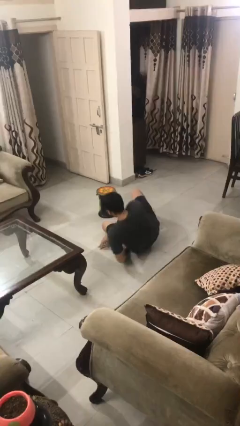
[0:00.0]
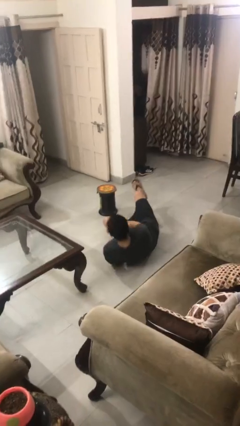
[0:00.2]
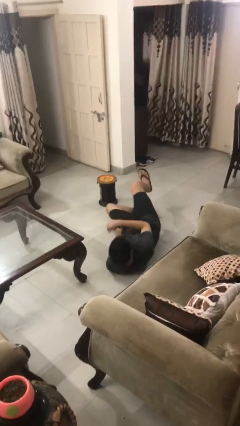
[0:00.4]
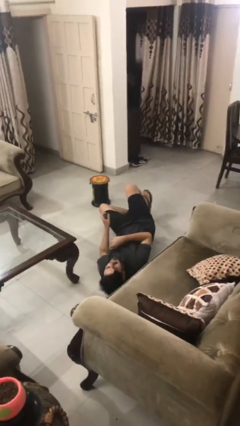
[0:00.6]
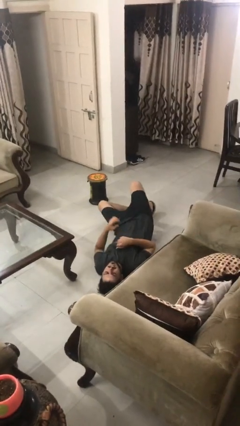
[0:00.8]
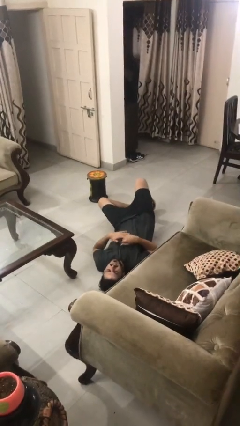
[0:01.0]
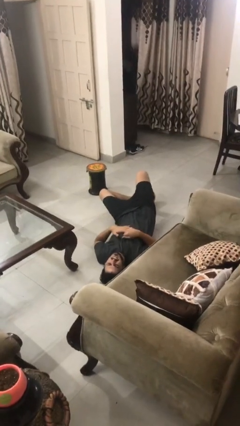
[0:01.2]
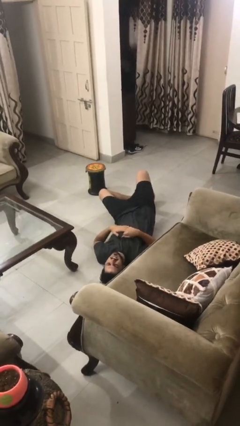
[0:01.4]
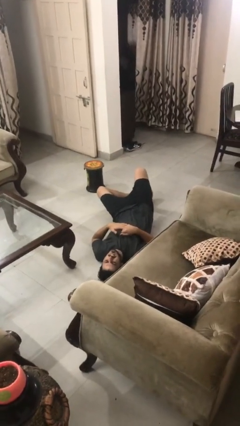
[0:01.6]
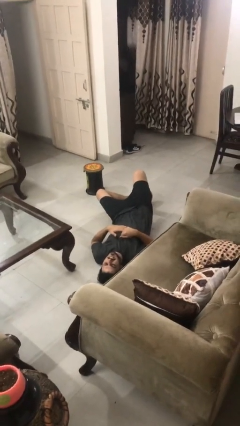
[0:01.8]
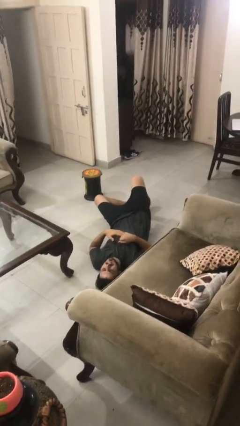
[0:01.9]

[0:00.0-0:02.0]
person lies down on floor

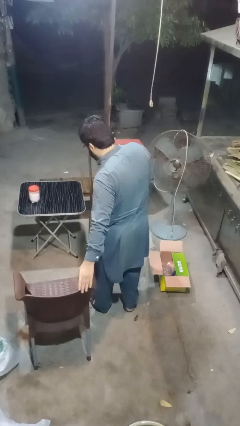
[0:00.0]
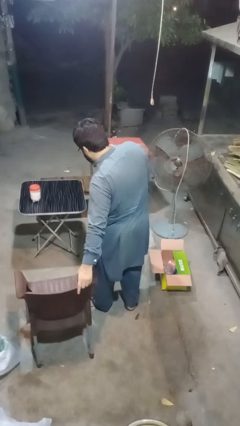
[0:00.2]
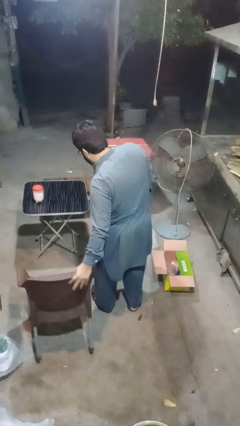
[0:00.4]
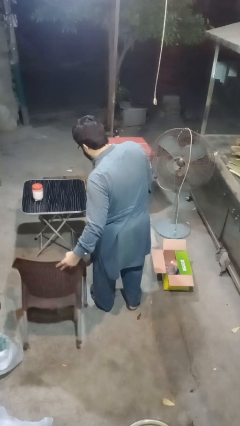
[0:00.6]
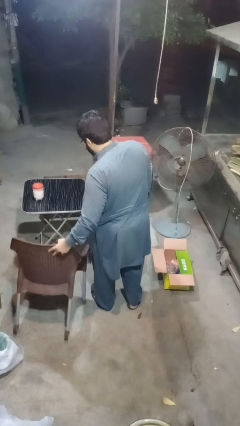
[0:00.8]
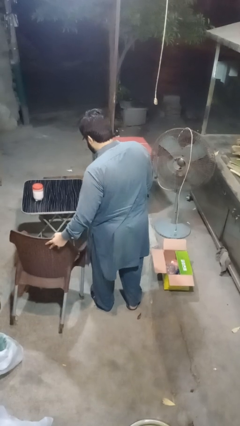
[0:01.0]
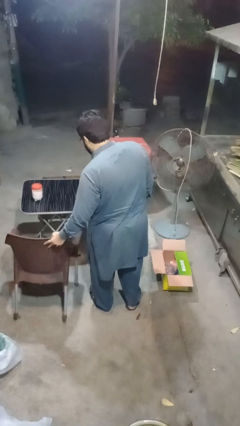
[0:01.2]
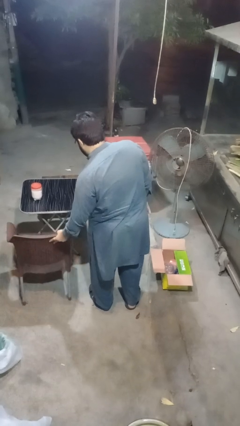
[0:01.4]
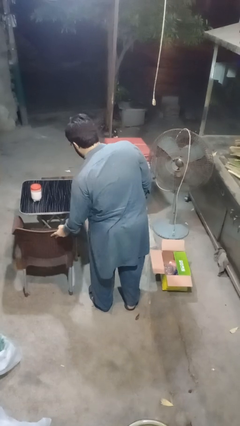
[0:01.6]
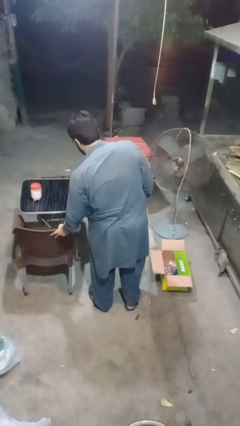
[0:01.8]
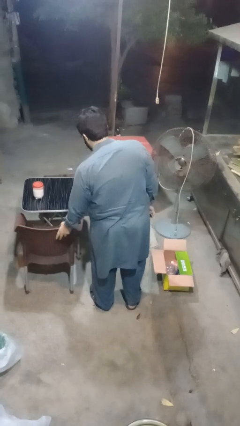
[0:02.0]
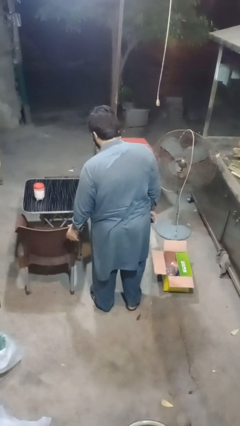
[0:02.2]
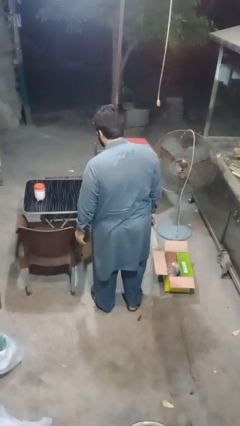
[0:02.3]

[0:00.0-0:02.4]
person pushes in chair

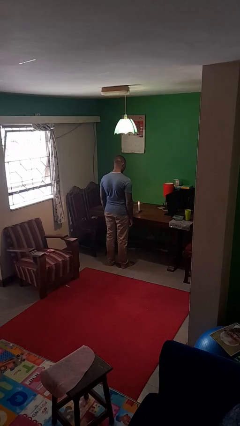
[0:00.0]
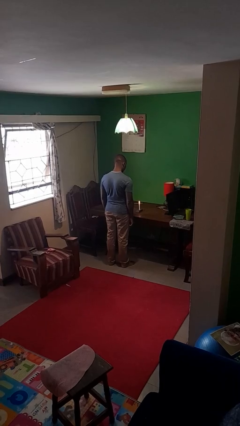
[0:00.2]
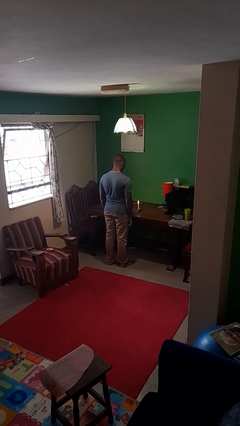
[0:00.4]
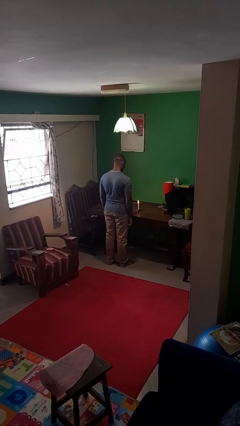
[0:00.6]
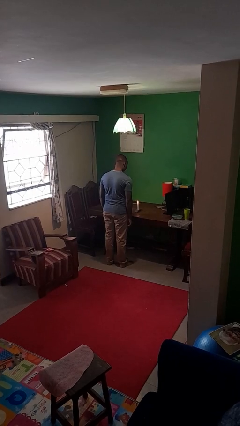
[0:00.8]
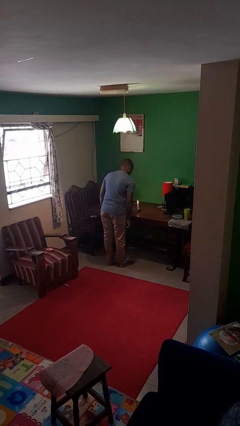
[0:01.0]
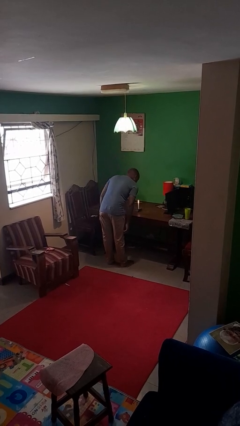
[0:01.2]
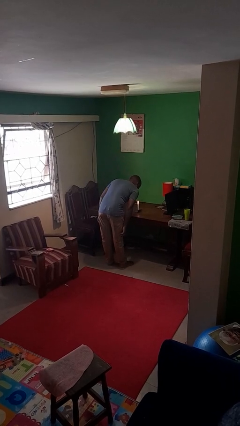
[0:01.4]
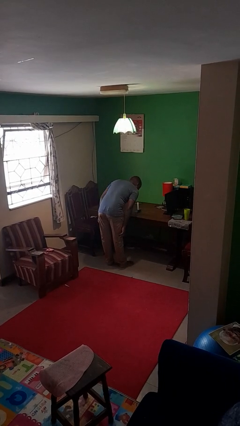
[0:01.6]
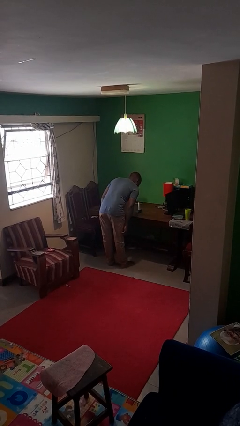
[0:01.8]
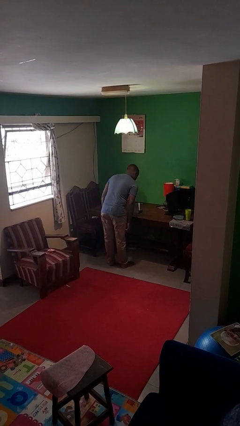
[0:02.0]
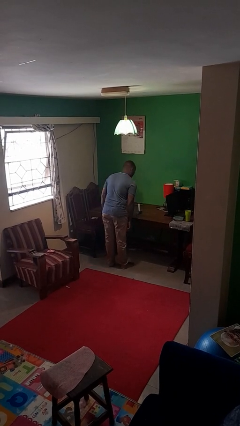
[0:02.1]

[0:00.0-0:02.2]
person extinguishes candle

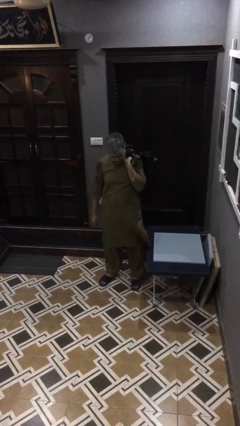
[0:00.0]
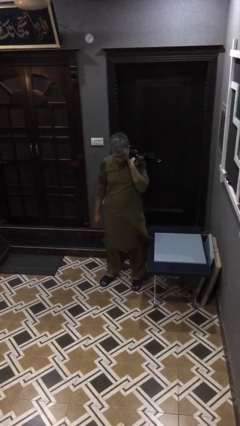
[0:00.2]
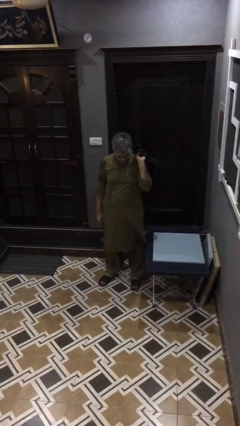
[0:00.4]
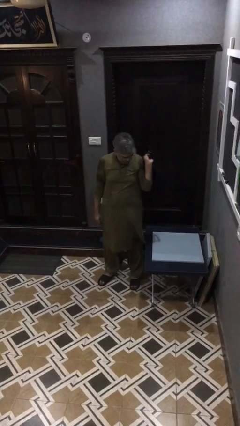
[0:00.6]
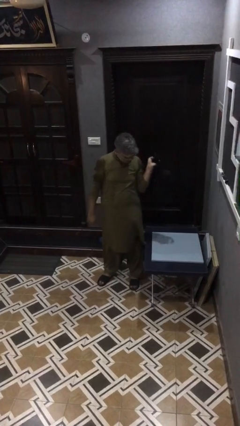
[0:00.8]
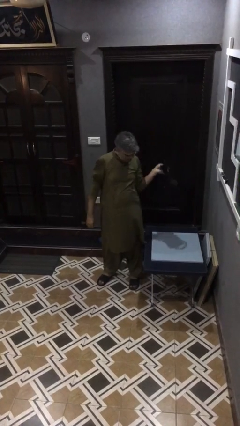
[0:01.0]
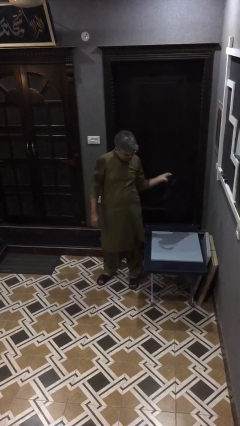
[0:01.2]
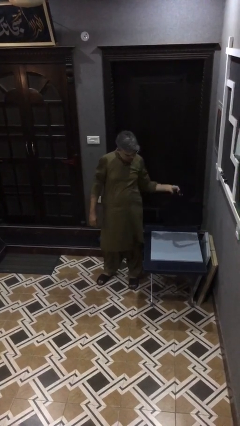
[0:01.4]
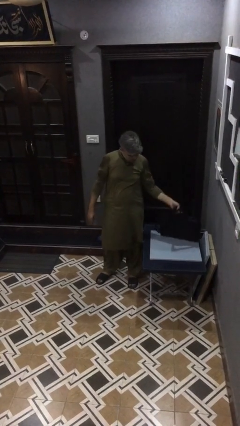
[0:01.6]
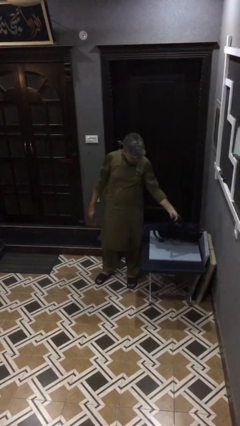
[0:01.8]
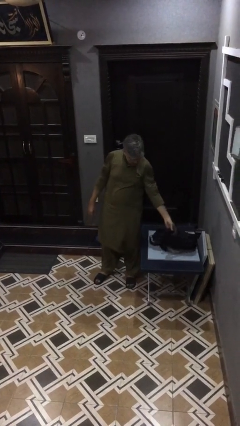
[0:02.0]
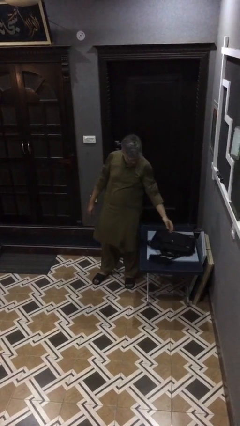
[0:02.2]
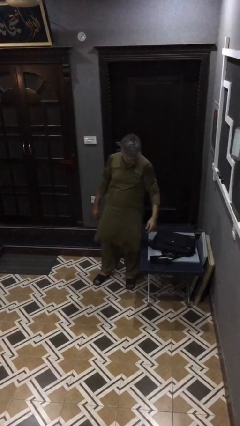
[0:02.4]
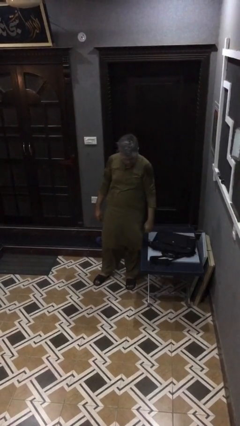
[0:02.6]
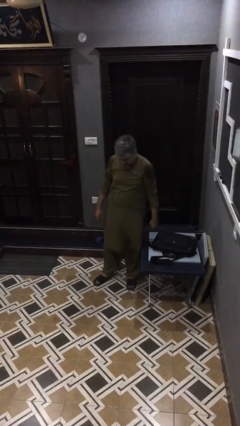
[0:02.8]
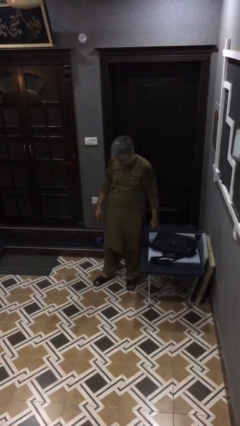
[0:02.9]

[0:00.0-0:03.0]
person puts down object on table

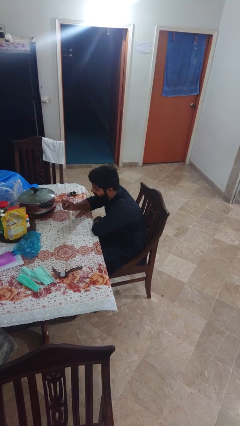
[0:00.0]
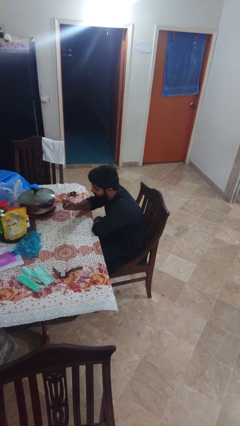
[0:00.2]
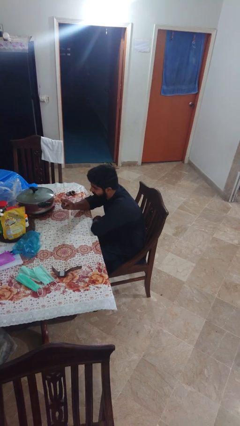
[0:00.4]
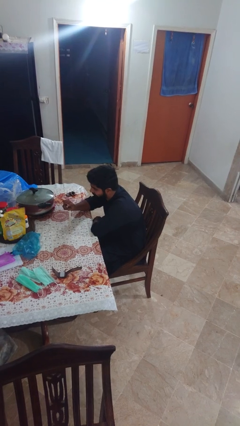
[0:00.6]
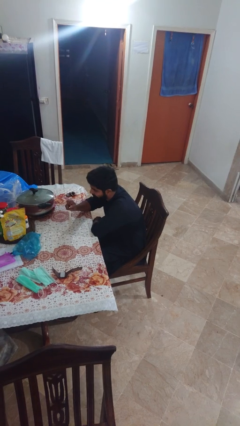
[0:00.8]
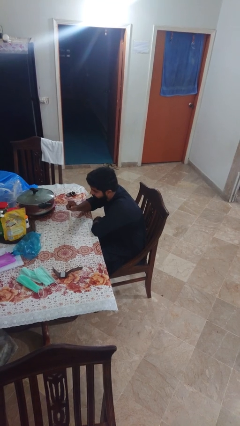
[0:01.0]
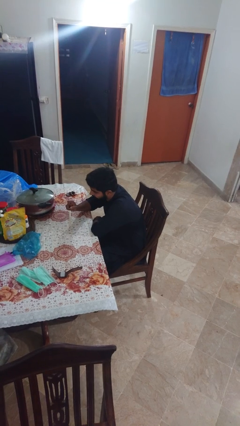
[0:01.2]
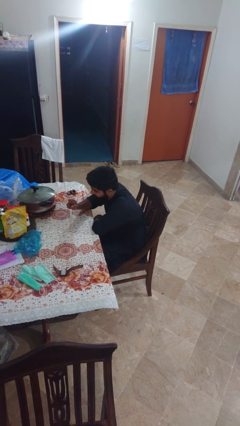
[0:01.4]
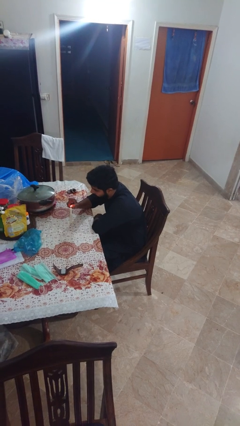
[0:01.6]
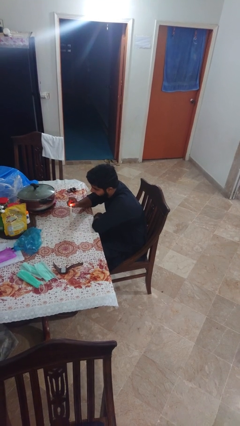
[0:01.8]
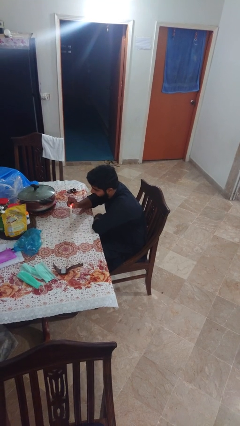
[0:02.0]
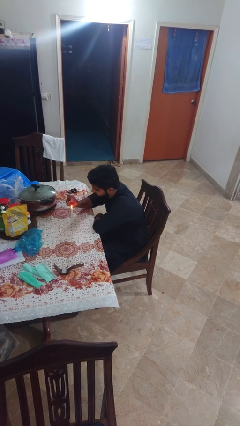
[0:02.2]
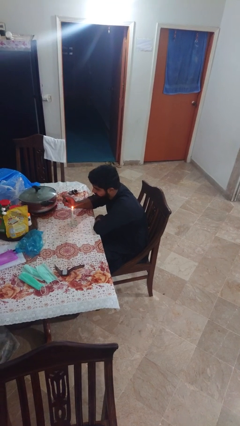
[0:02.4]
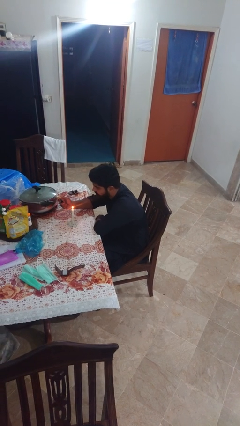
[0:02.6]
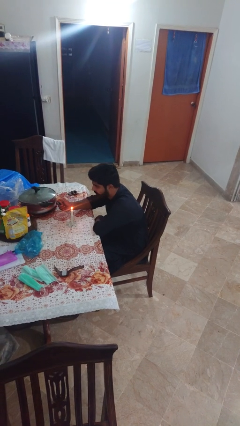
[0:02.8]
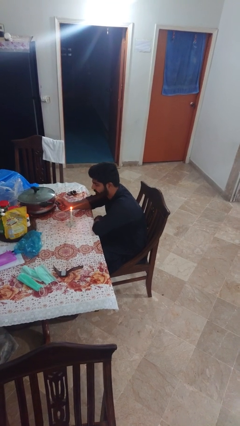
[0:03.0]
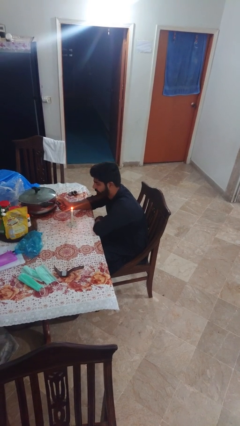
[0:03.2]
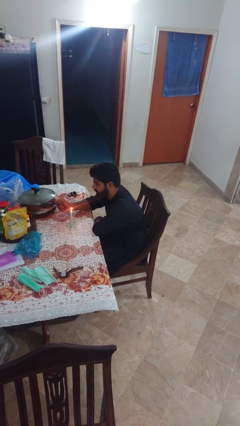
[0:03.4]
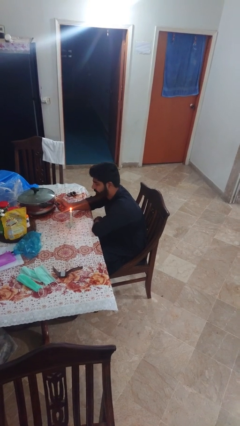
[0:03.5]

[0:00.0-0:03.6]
person lights candle

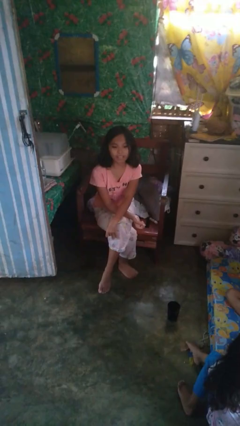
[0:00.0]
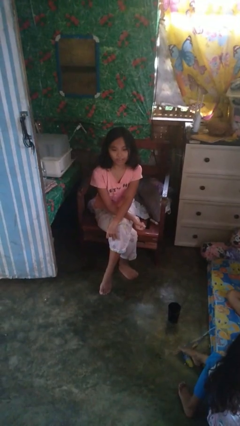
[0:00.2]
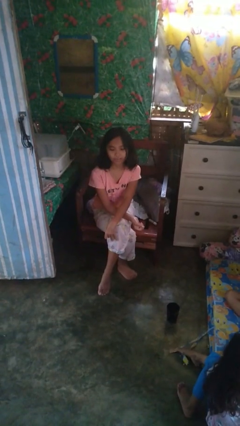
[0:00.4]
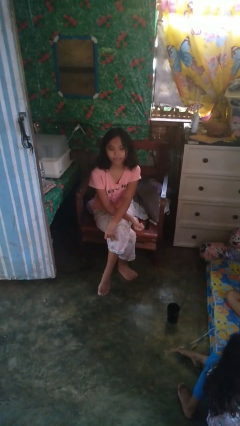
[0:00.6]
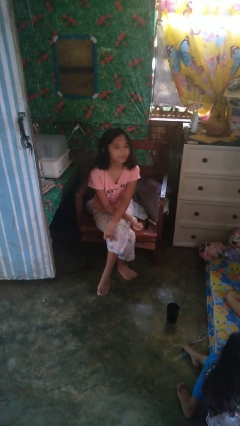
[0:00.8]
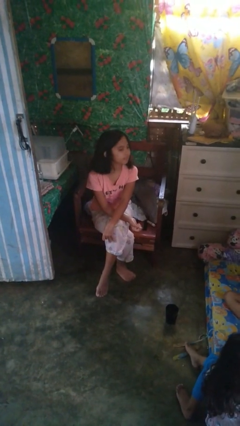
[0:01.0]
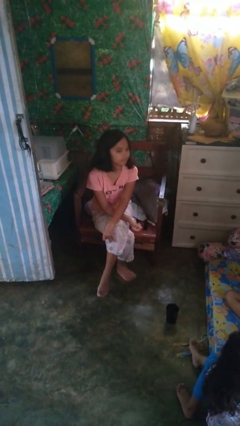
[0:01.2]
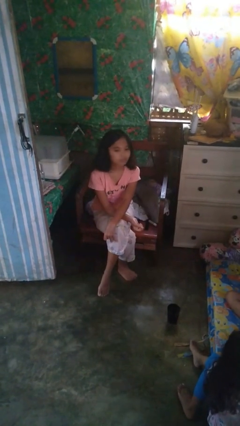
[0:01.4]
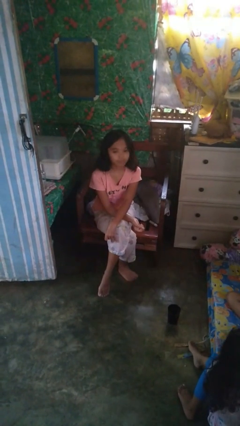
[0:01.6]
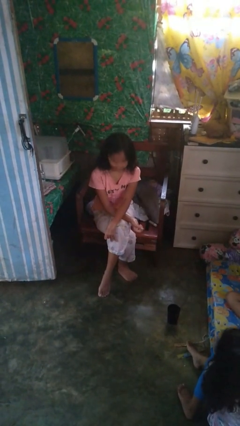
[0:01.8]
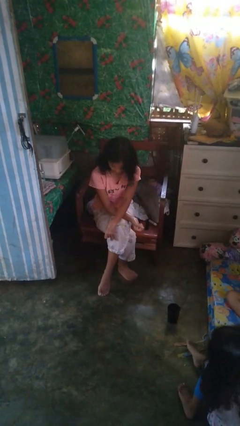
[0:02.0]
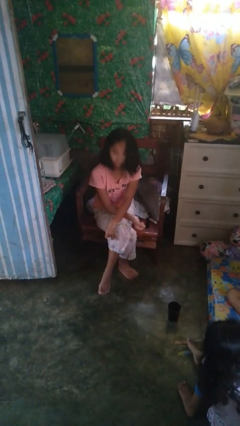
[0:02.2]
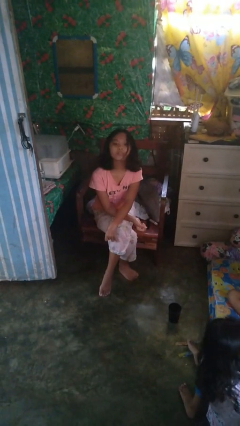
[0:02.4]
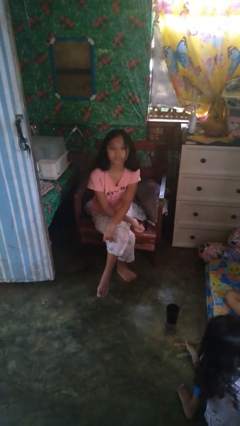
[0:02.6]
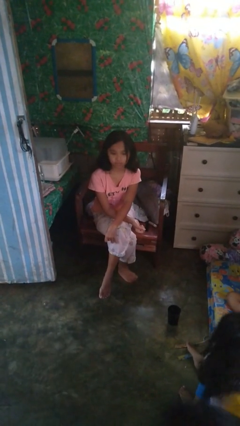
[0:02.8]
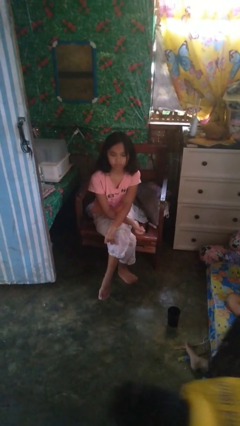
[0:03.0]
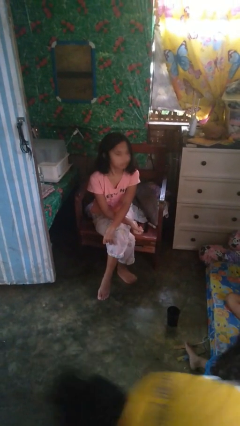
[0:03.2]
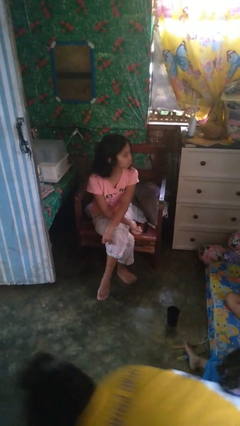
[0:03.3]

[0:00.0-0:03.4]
person nods head

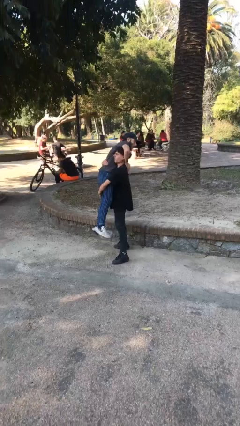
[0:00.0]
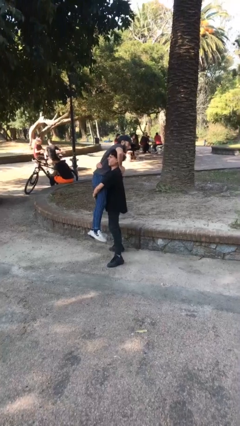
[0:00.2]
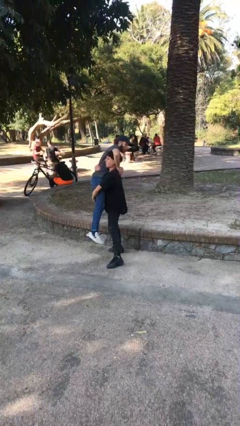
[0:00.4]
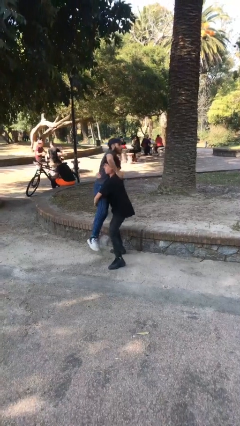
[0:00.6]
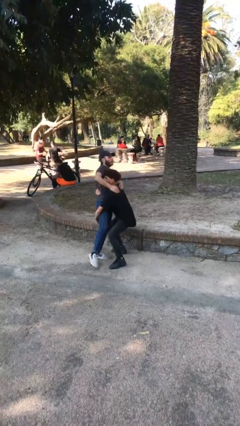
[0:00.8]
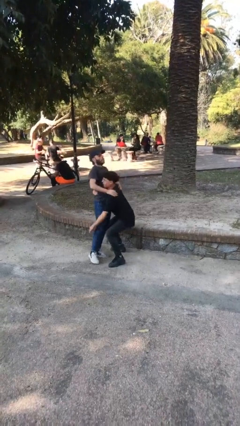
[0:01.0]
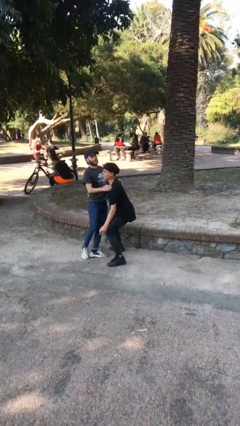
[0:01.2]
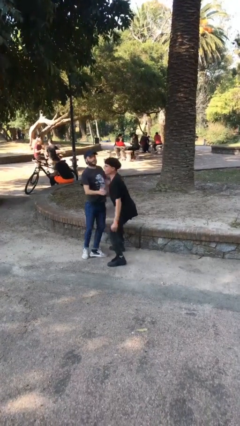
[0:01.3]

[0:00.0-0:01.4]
person puts down person
